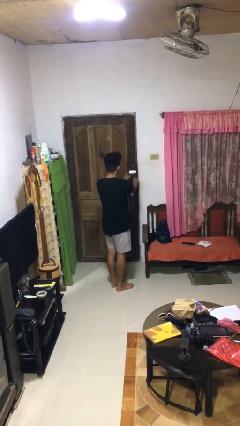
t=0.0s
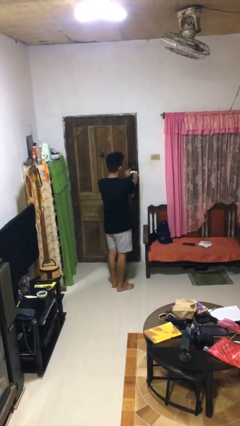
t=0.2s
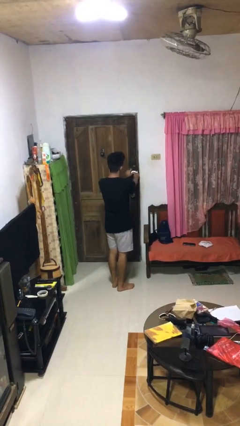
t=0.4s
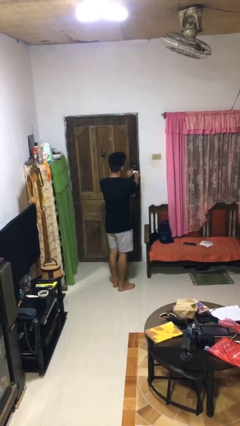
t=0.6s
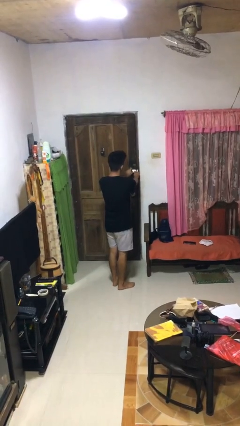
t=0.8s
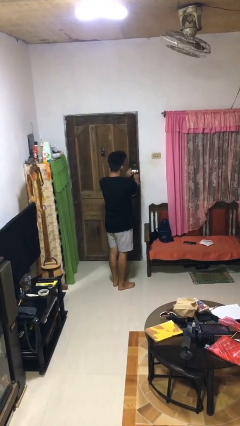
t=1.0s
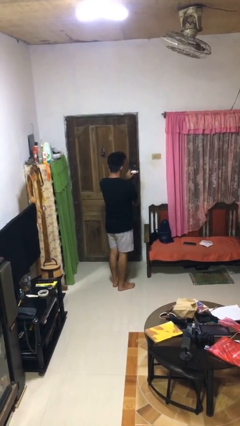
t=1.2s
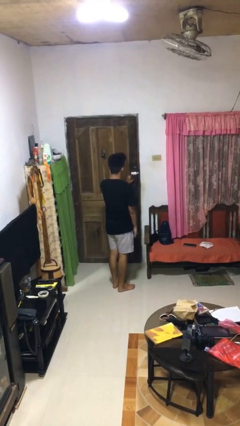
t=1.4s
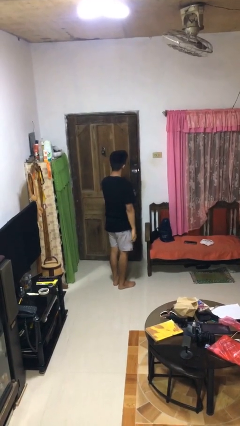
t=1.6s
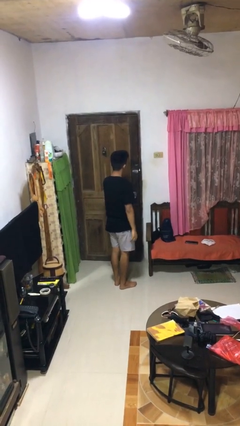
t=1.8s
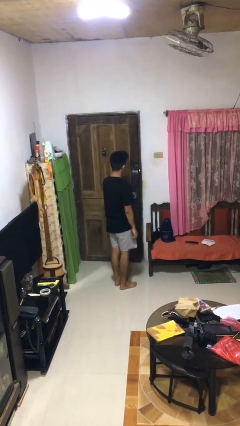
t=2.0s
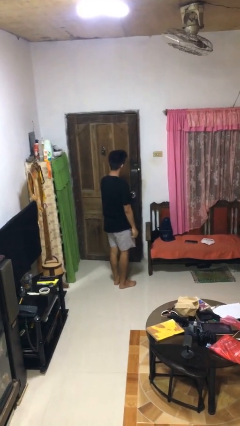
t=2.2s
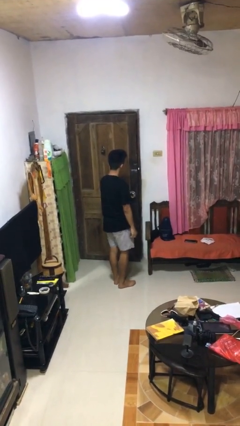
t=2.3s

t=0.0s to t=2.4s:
person unlocks door with keys

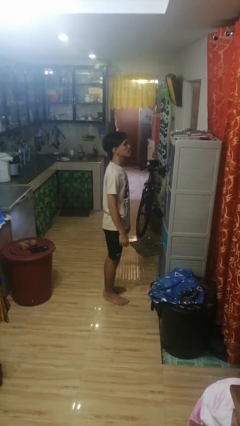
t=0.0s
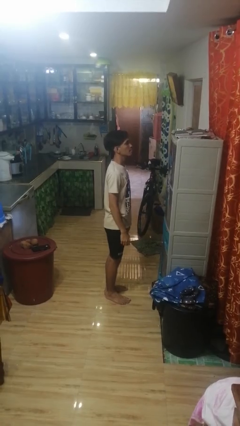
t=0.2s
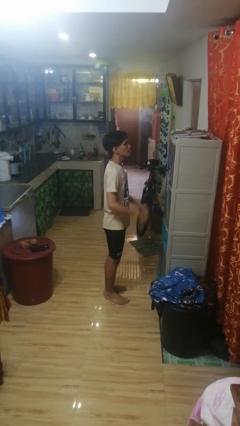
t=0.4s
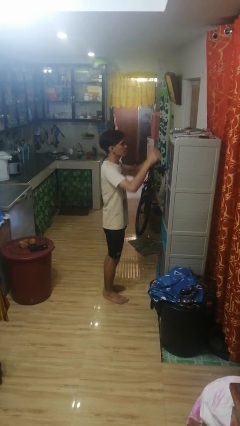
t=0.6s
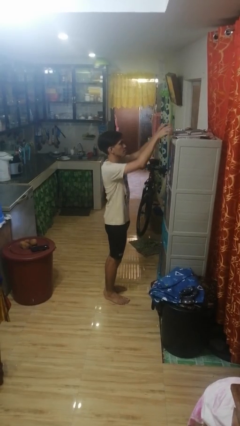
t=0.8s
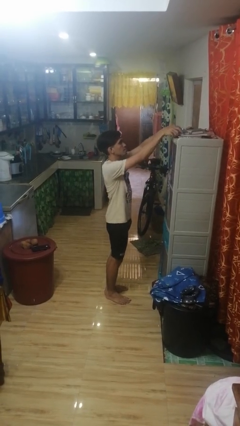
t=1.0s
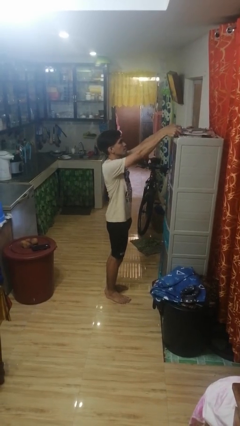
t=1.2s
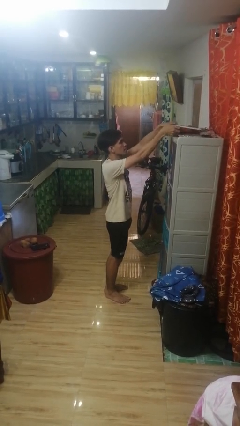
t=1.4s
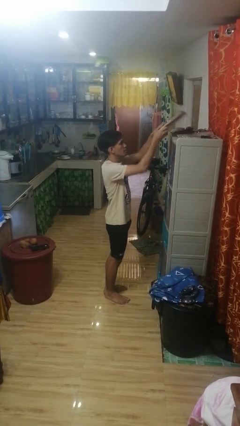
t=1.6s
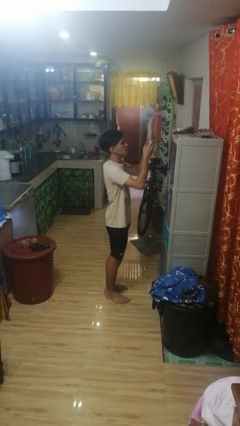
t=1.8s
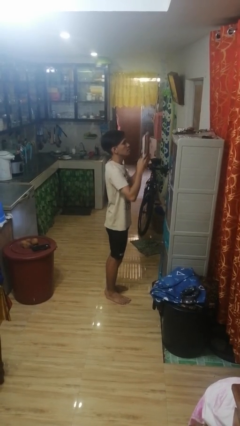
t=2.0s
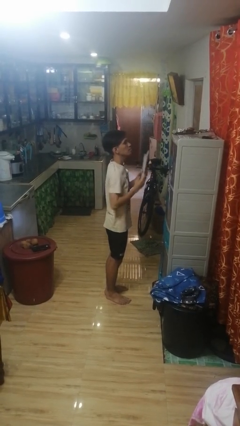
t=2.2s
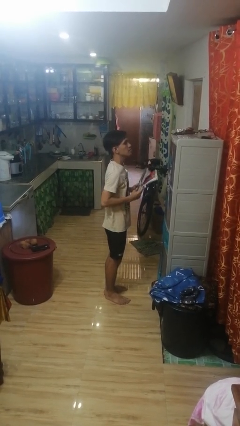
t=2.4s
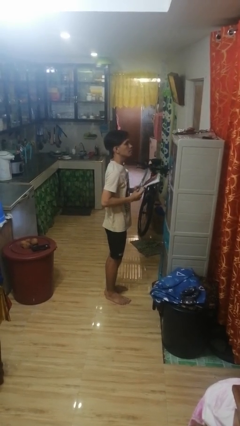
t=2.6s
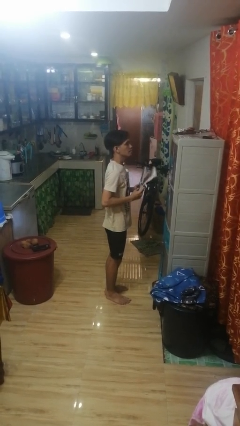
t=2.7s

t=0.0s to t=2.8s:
person picks up object from shelf

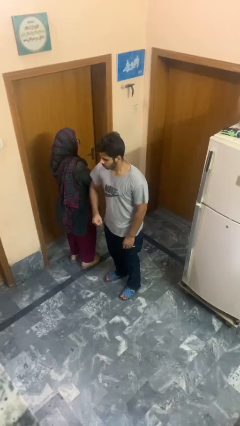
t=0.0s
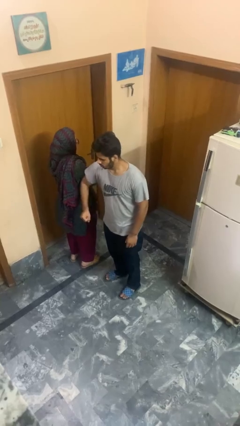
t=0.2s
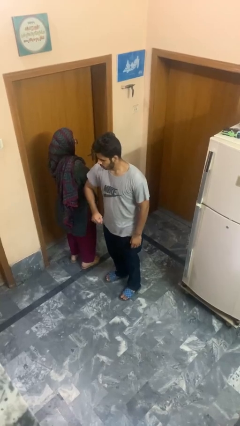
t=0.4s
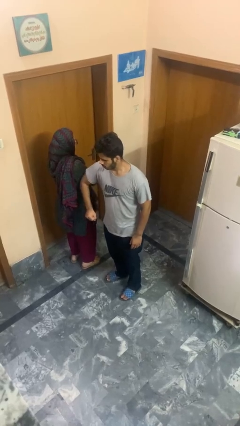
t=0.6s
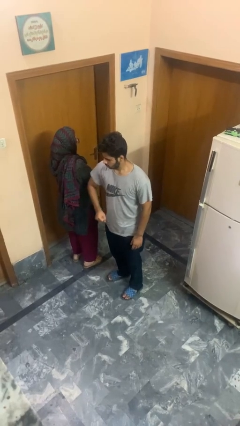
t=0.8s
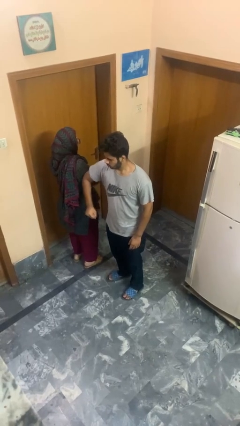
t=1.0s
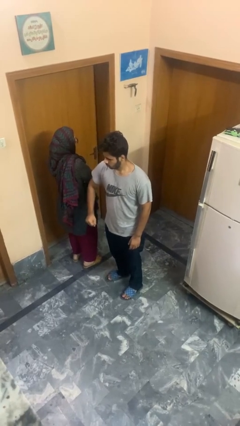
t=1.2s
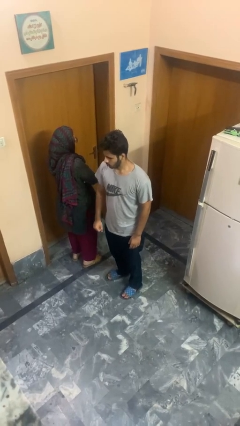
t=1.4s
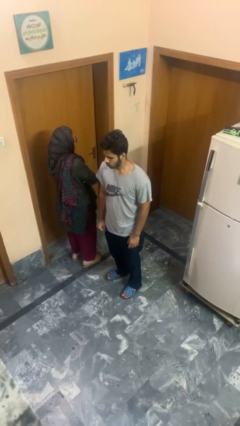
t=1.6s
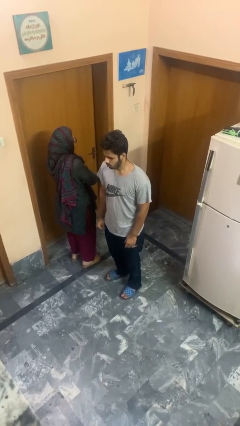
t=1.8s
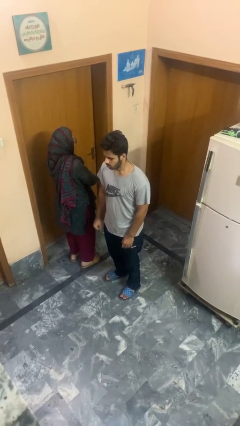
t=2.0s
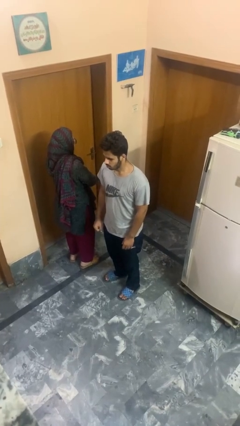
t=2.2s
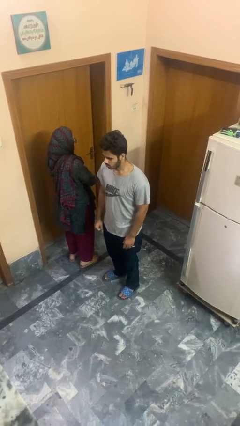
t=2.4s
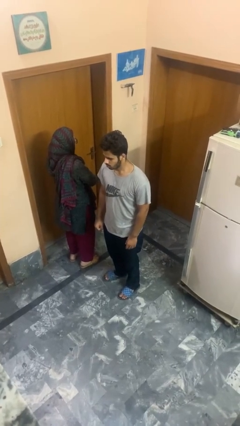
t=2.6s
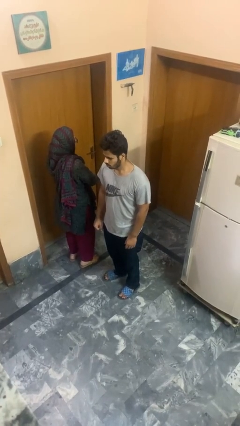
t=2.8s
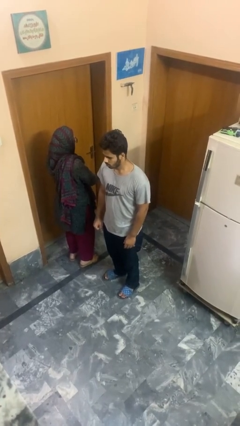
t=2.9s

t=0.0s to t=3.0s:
person nudges person with elbow

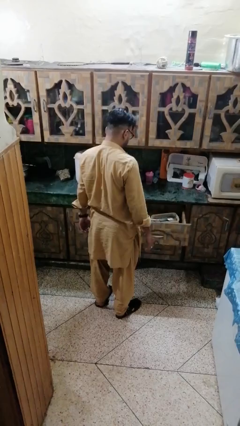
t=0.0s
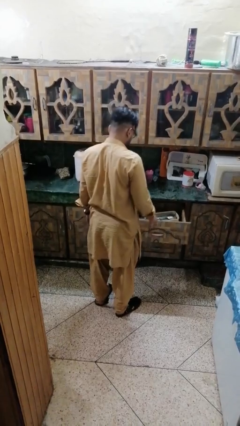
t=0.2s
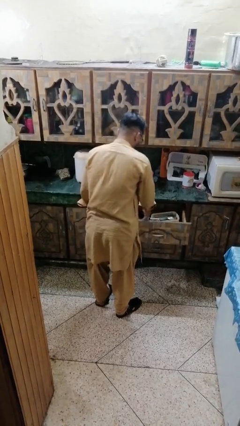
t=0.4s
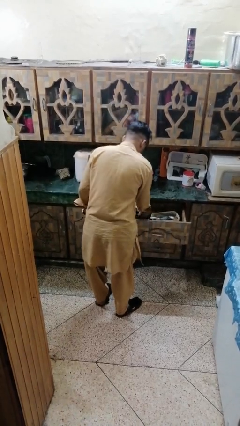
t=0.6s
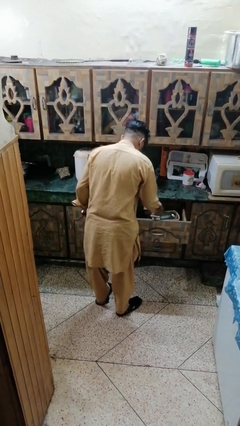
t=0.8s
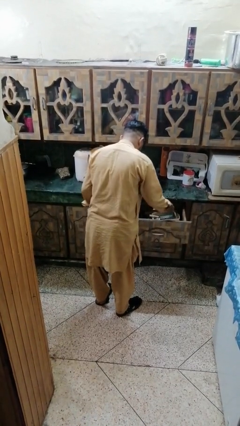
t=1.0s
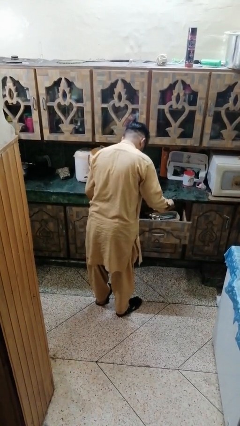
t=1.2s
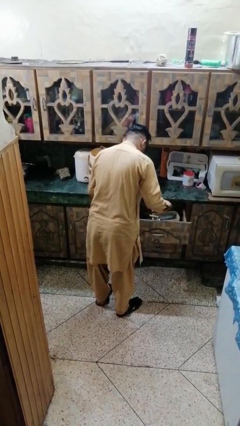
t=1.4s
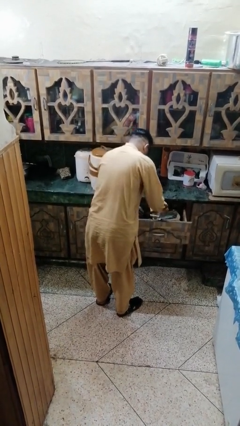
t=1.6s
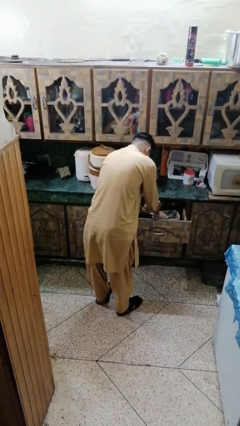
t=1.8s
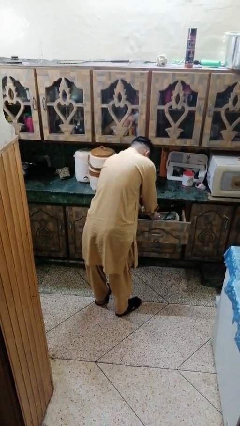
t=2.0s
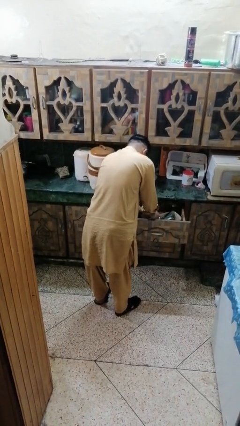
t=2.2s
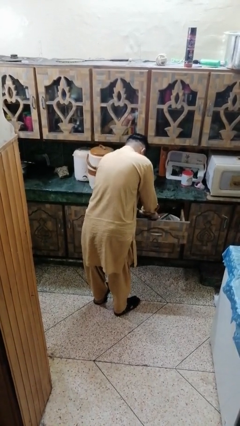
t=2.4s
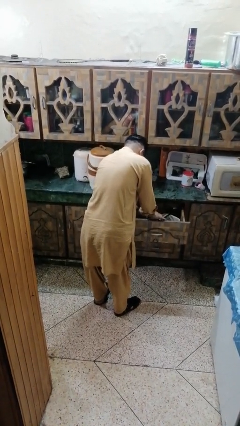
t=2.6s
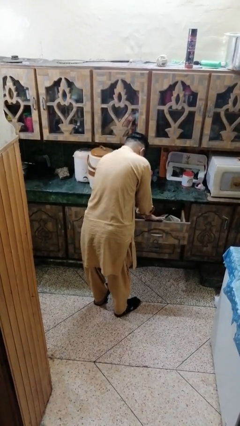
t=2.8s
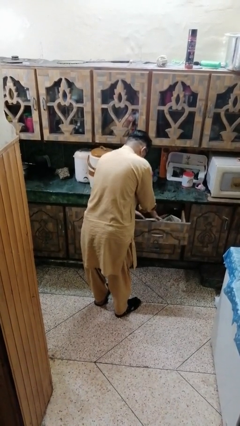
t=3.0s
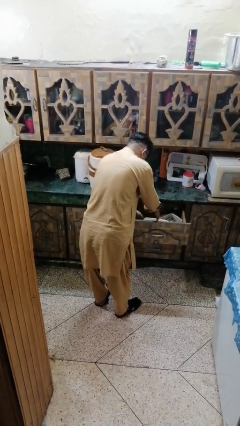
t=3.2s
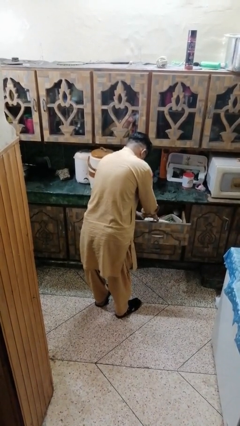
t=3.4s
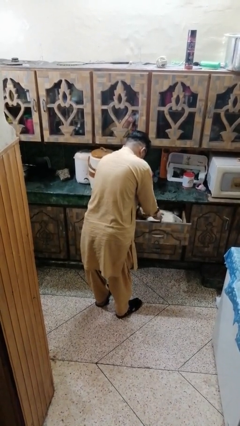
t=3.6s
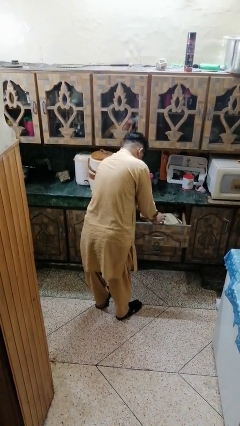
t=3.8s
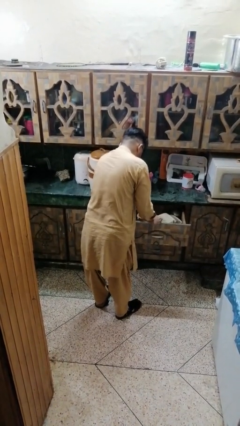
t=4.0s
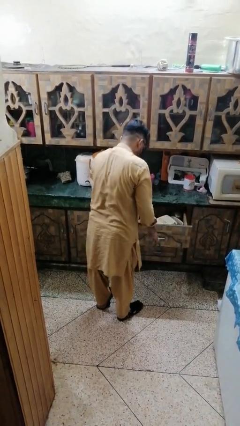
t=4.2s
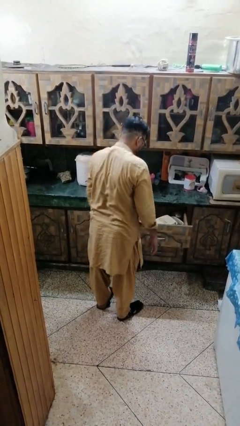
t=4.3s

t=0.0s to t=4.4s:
person searches in kitchen drawer

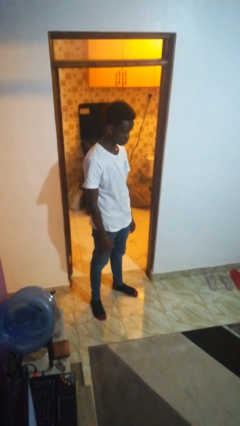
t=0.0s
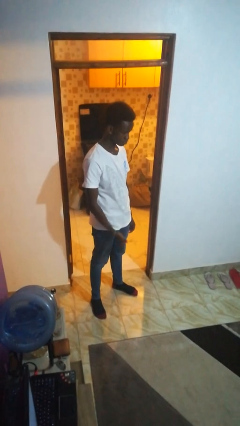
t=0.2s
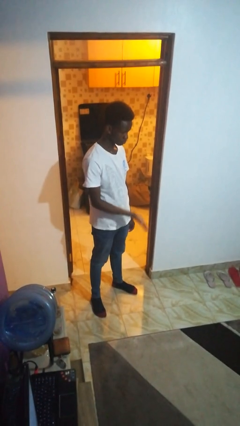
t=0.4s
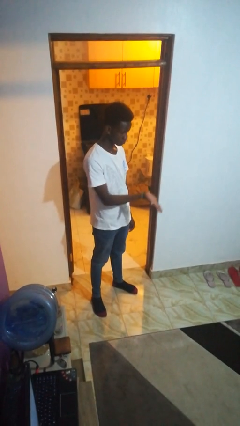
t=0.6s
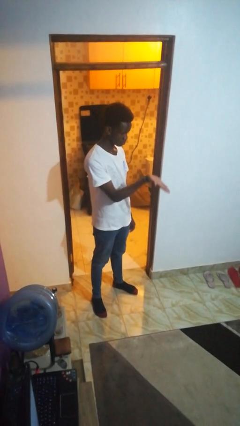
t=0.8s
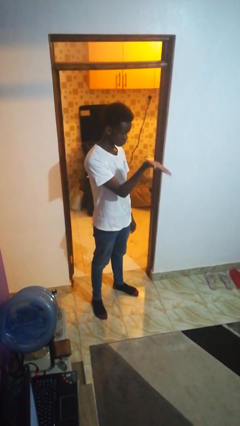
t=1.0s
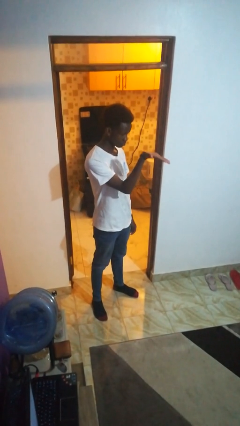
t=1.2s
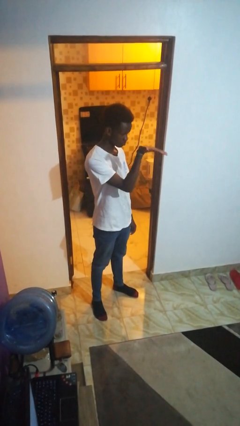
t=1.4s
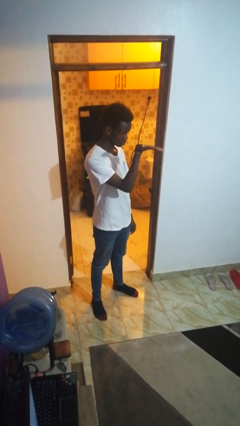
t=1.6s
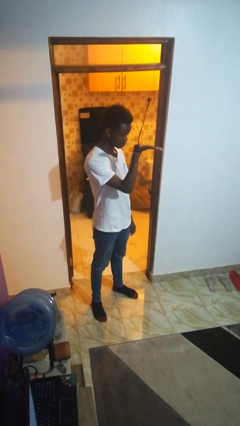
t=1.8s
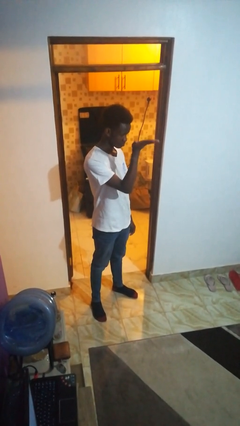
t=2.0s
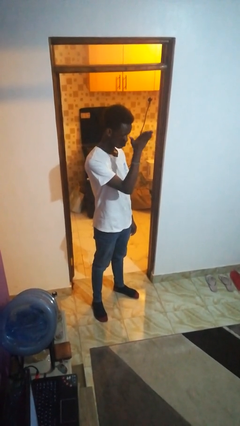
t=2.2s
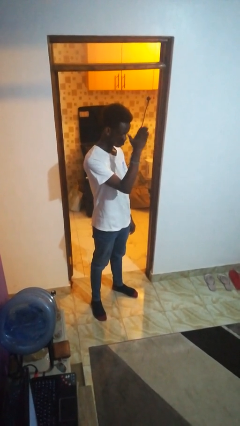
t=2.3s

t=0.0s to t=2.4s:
person gestures swipe up

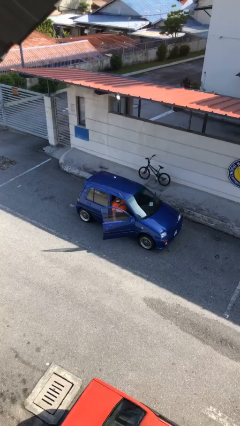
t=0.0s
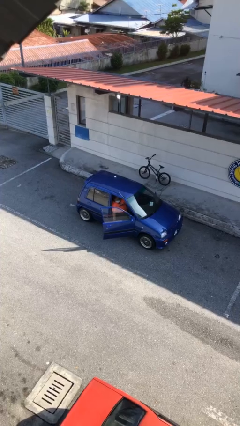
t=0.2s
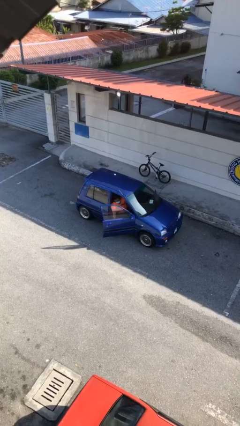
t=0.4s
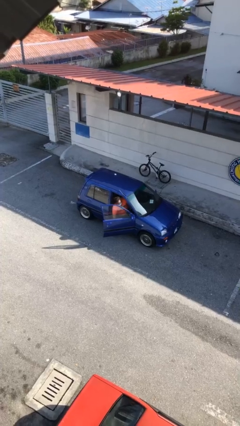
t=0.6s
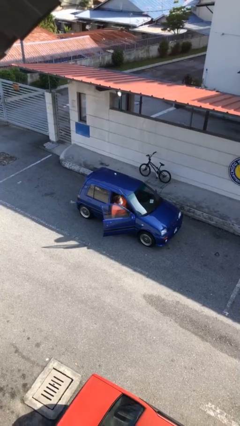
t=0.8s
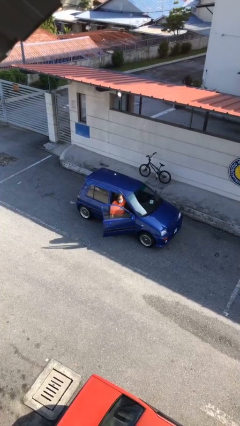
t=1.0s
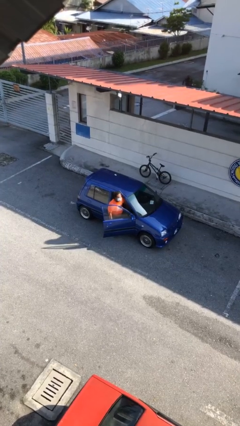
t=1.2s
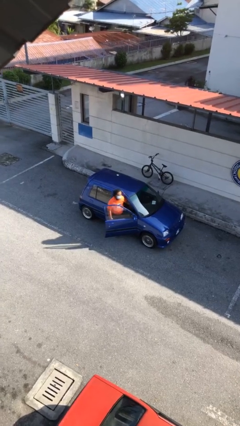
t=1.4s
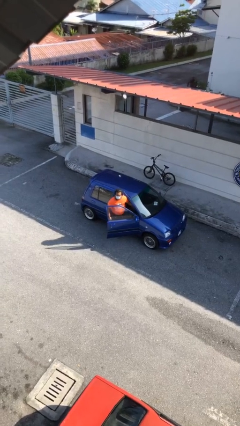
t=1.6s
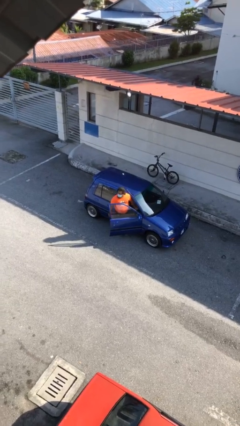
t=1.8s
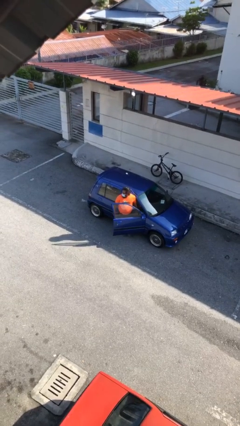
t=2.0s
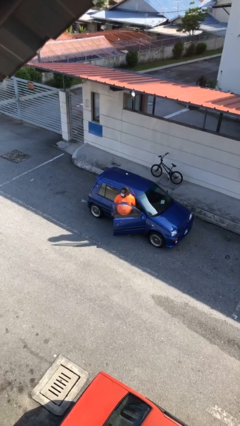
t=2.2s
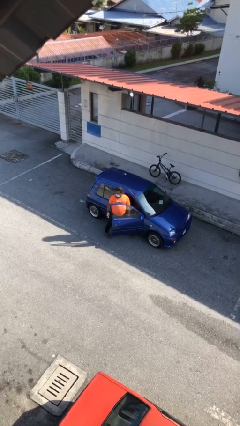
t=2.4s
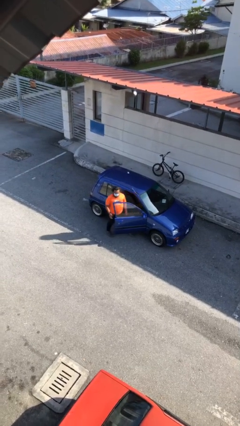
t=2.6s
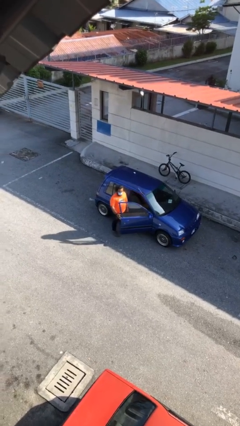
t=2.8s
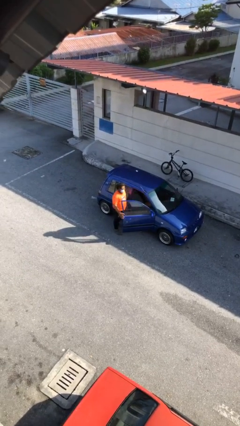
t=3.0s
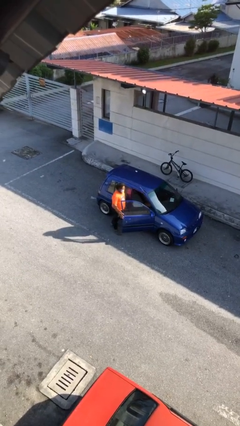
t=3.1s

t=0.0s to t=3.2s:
person exits car
